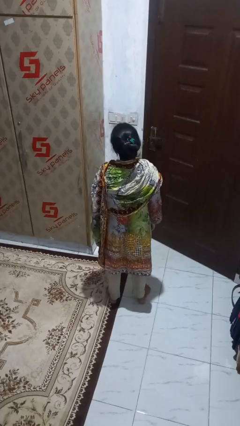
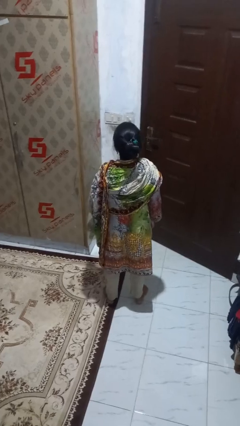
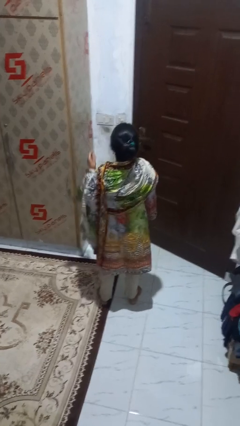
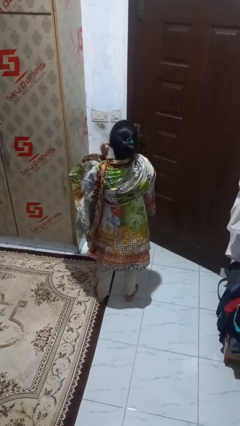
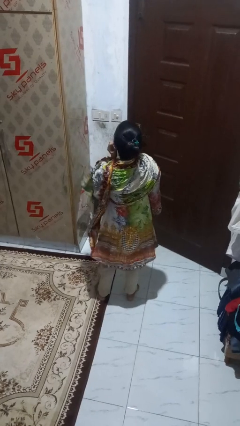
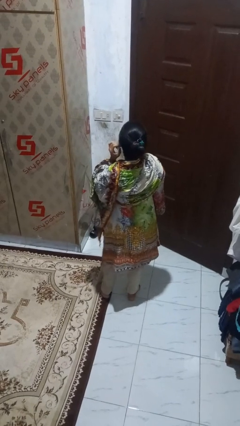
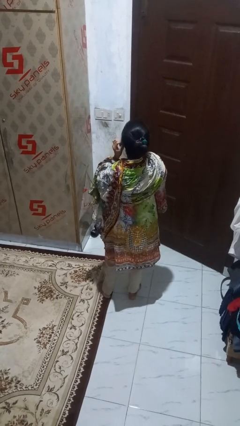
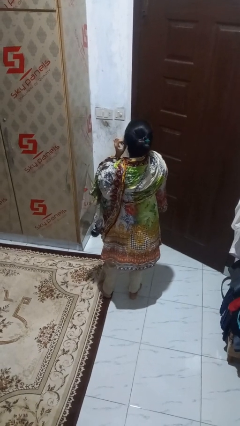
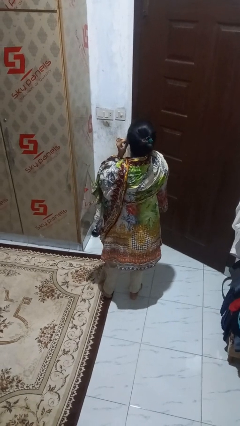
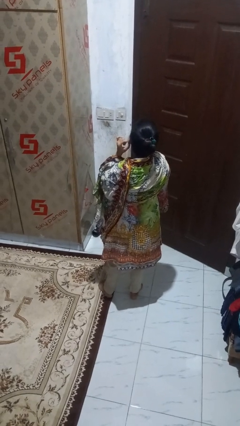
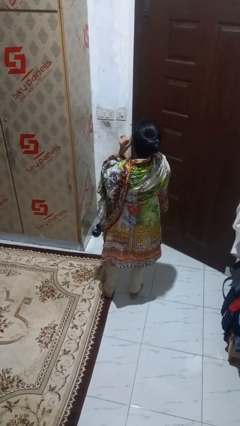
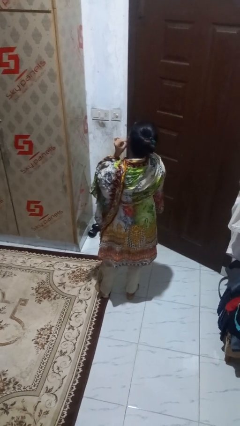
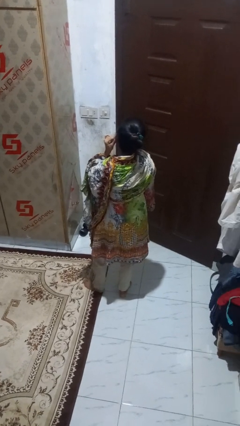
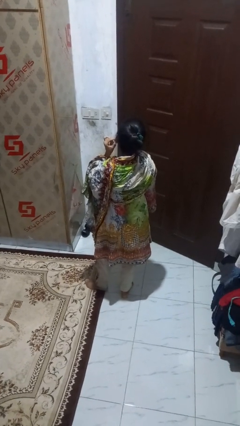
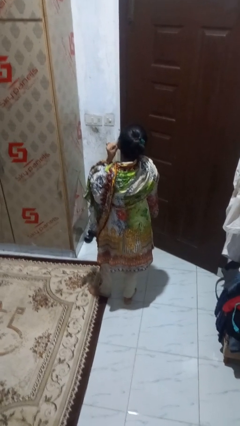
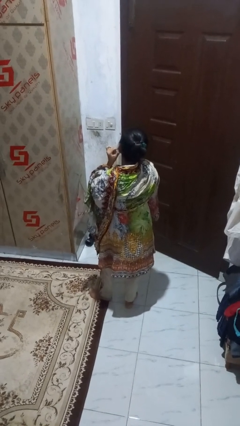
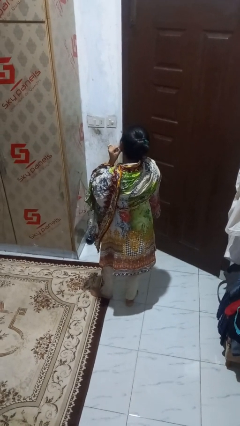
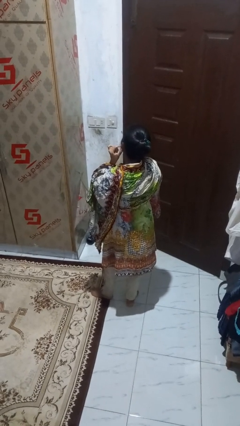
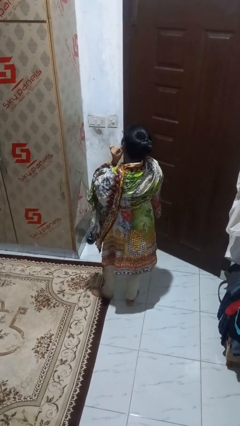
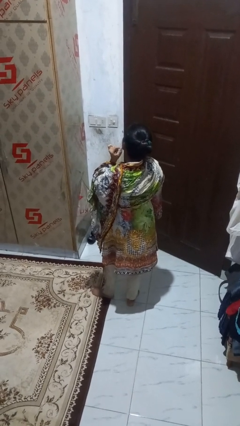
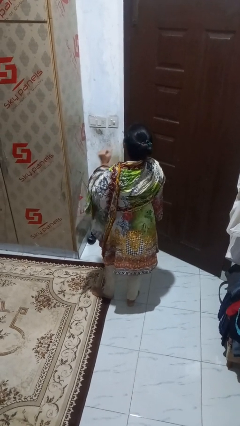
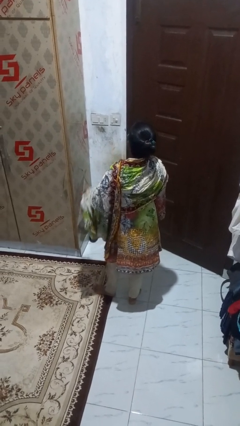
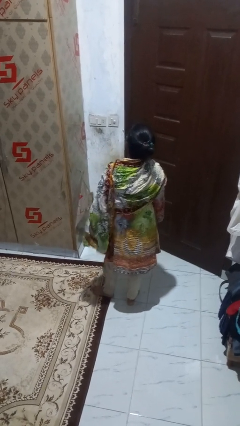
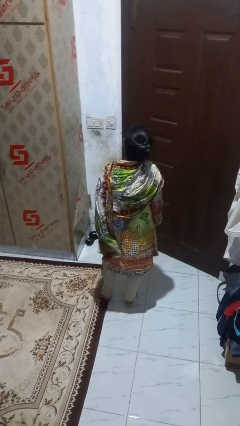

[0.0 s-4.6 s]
person touches earlobe

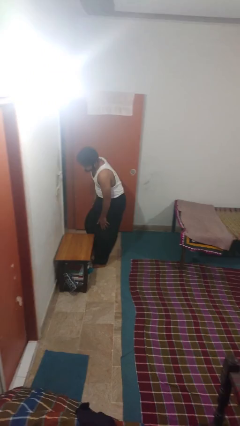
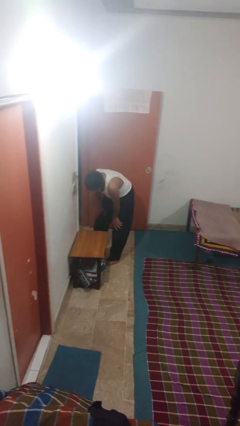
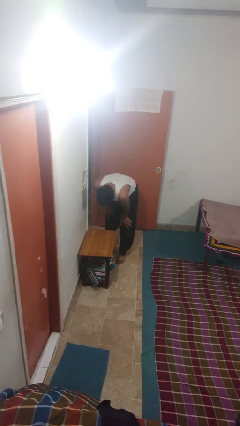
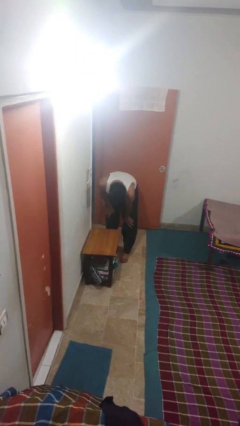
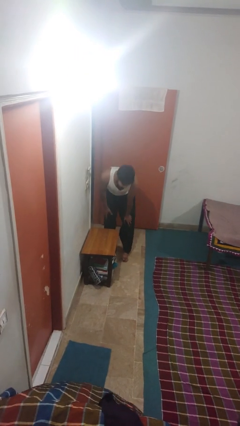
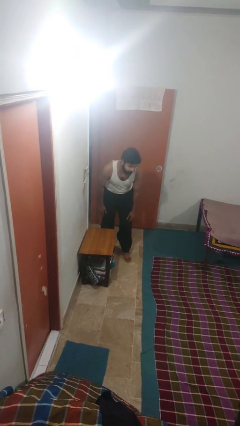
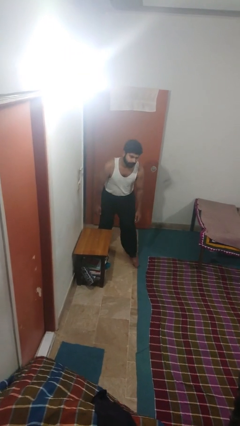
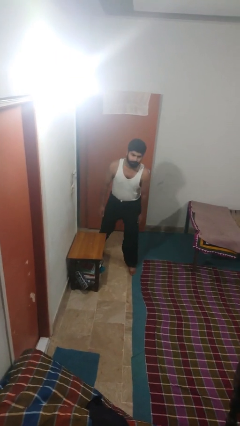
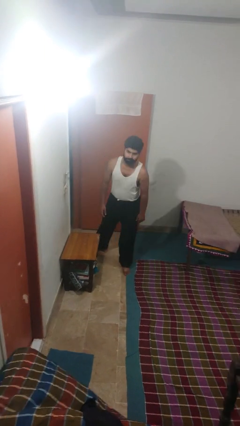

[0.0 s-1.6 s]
person bumps into table

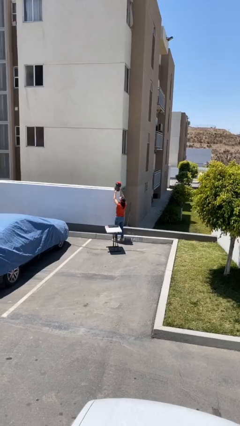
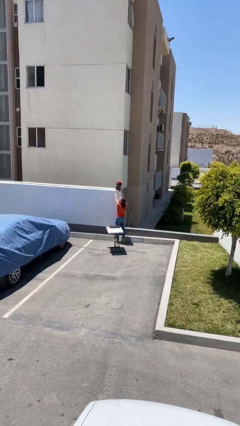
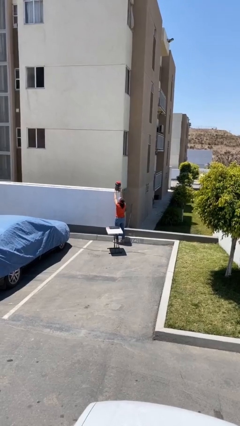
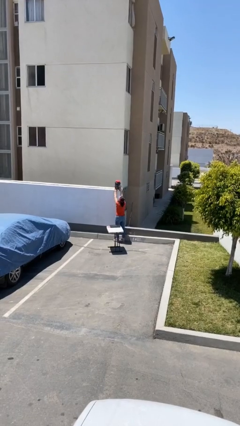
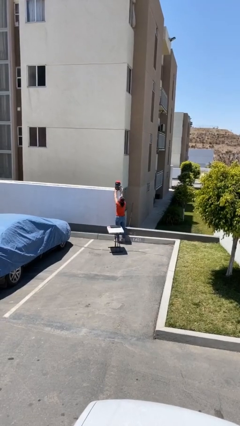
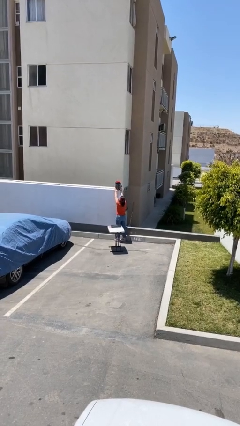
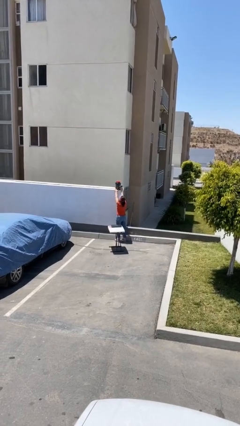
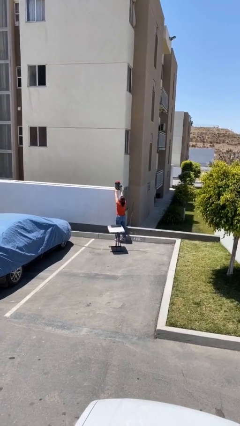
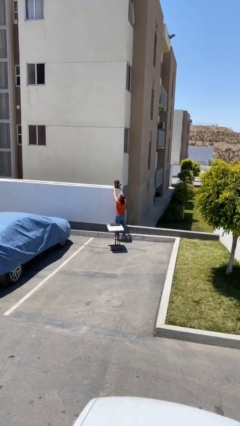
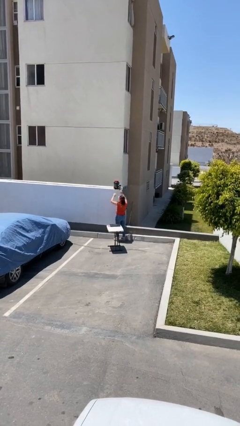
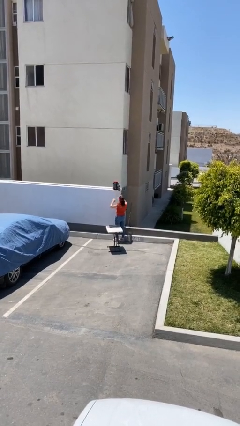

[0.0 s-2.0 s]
person puts down object on shelf

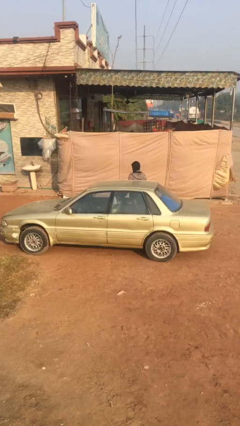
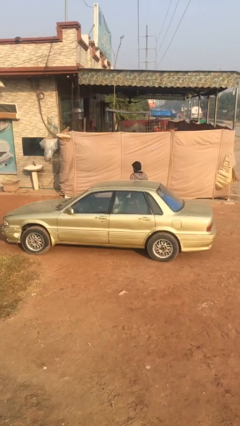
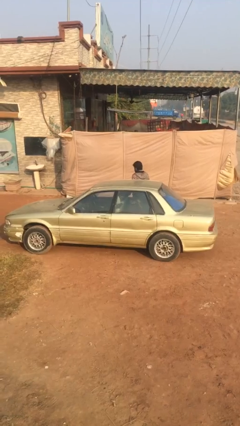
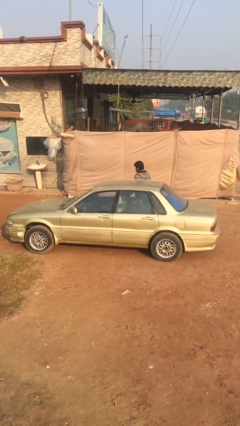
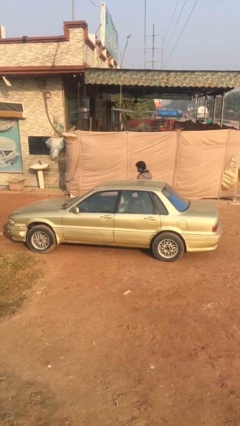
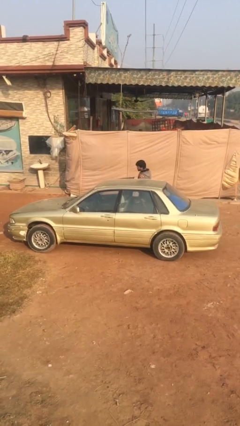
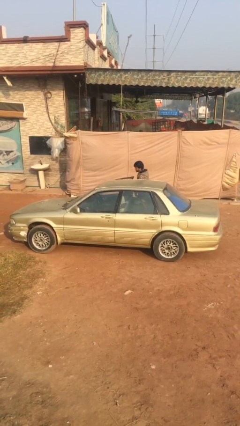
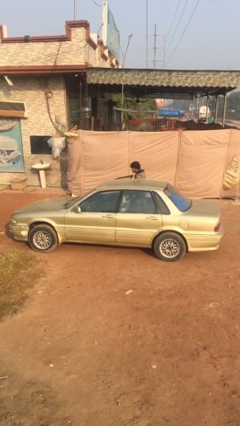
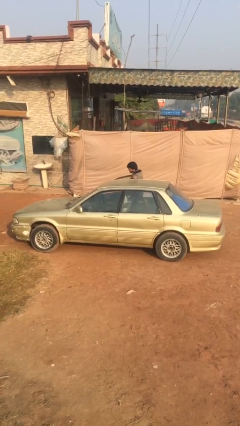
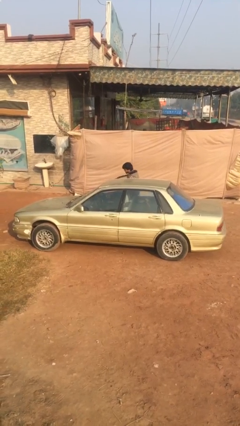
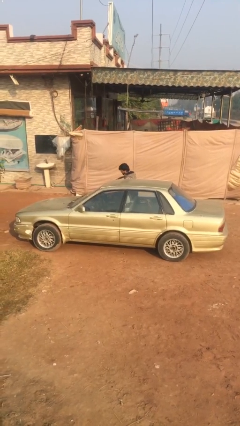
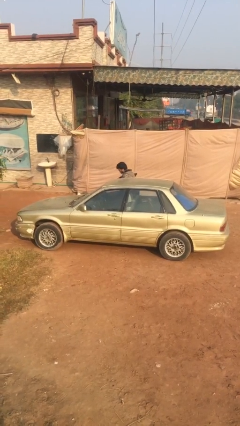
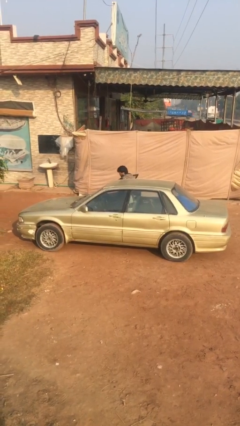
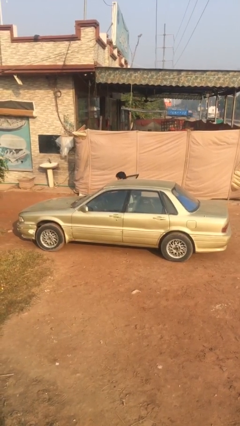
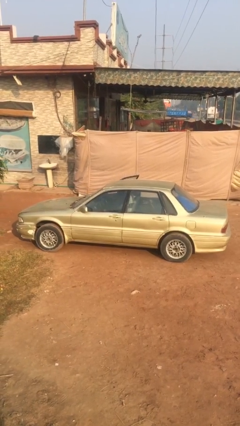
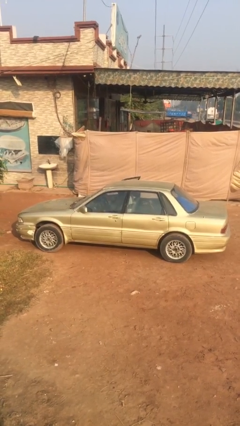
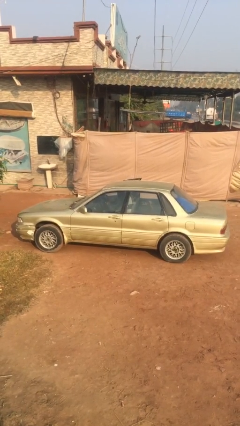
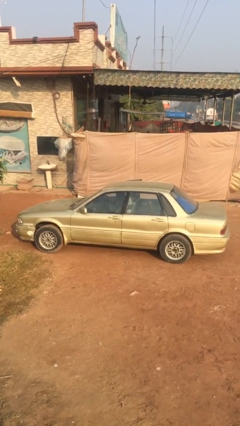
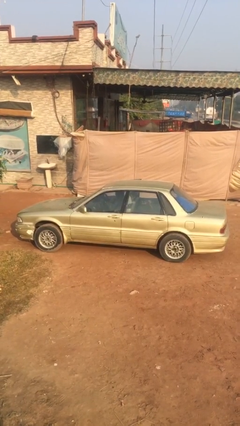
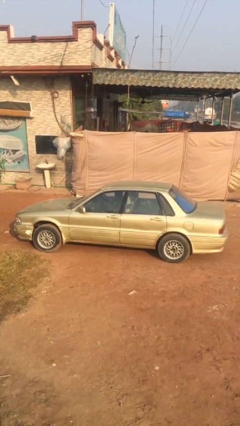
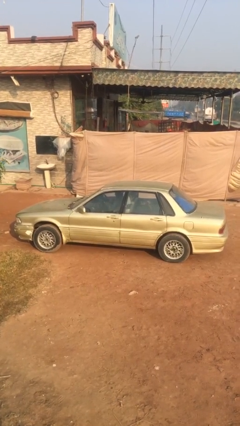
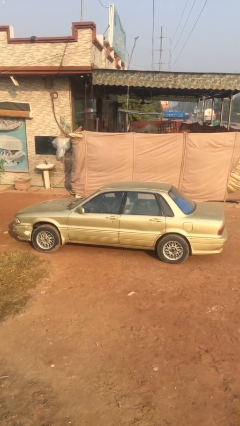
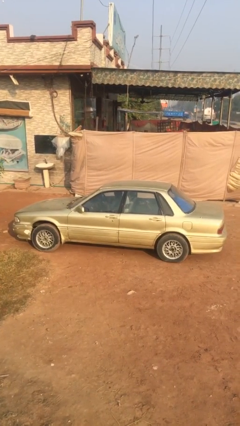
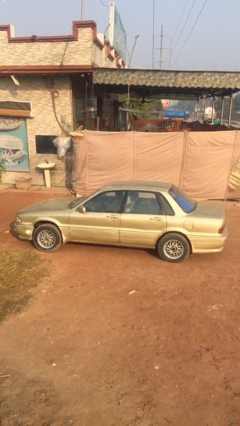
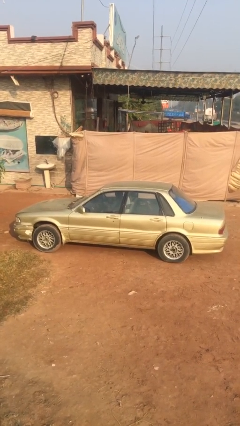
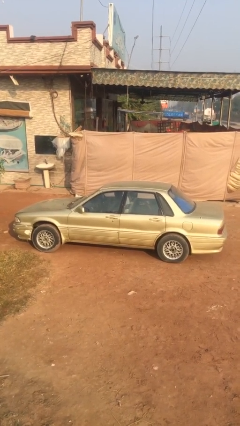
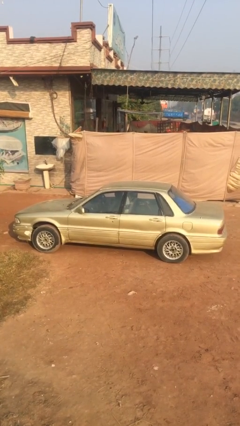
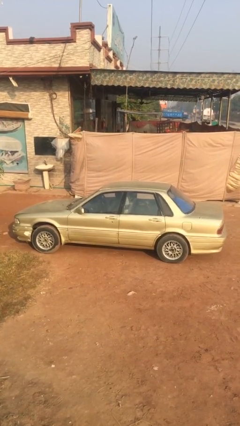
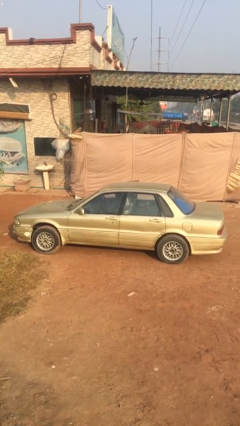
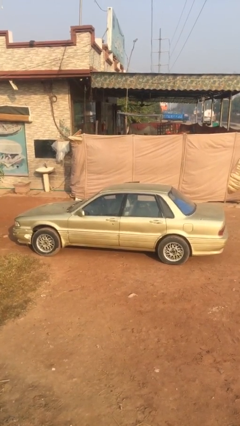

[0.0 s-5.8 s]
car picks up person

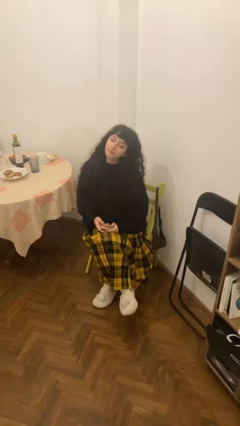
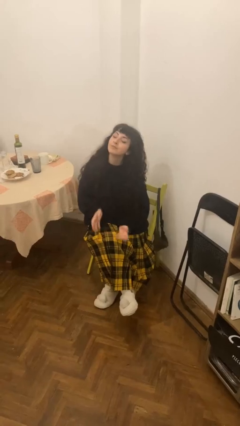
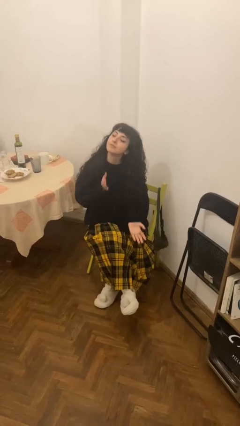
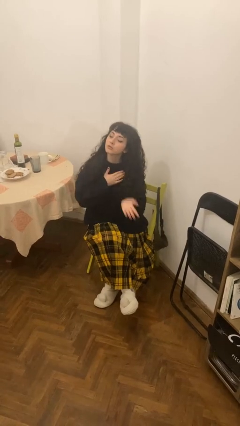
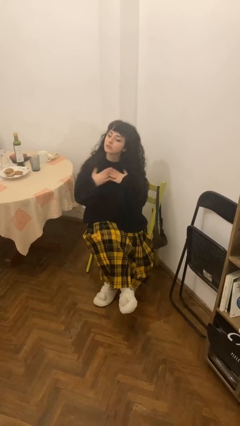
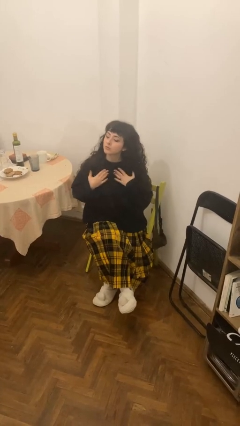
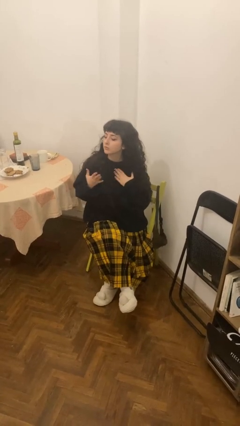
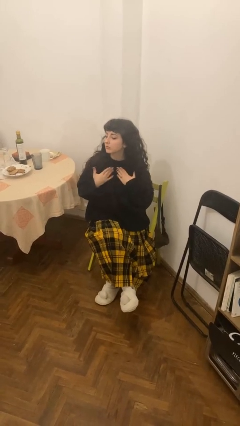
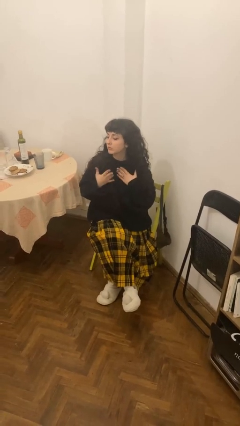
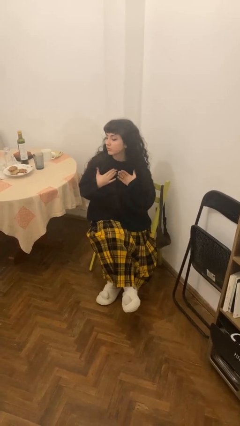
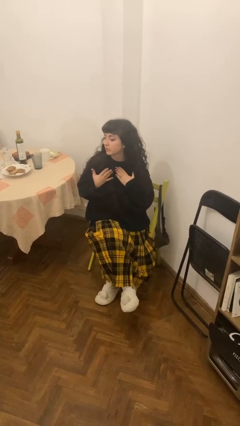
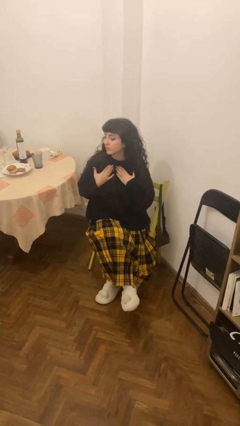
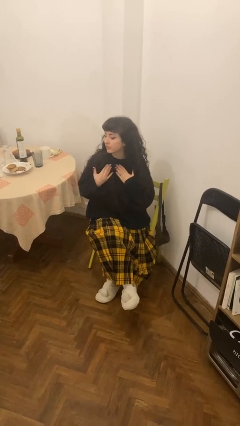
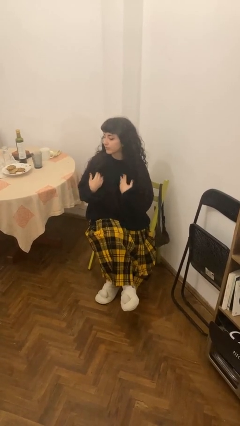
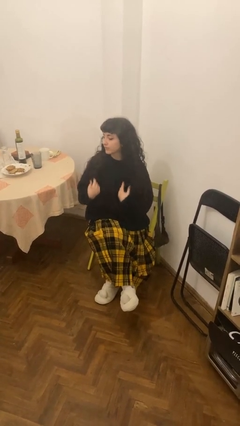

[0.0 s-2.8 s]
person drums on chest

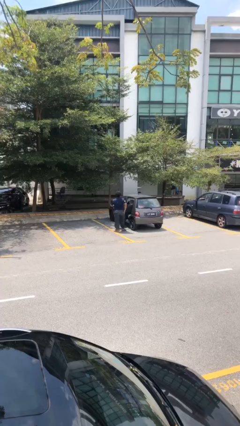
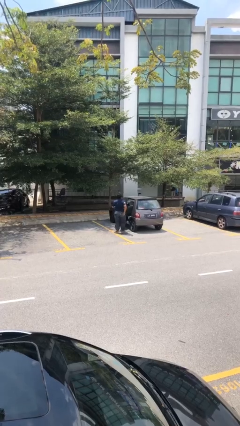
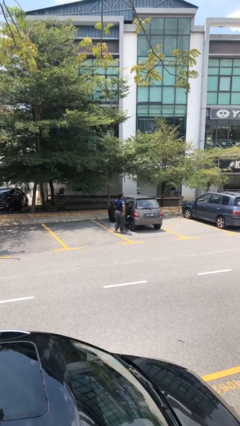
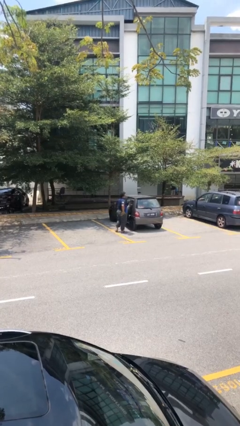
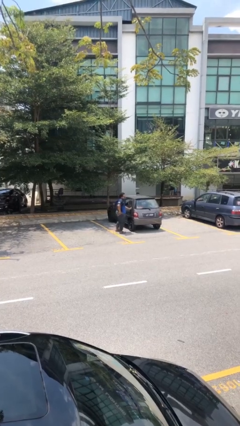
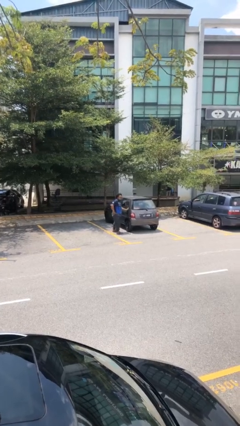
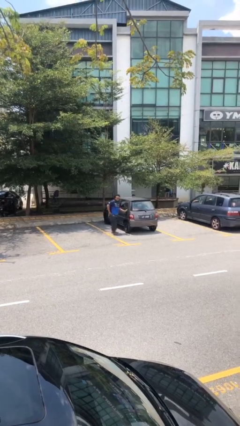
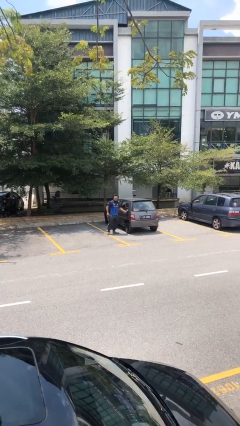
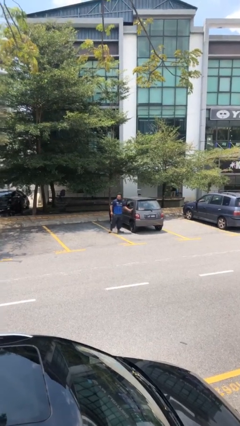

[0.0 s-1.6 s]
person closes car door
